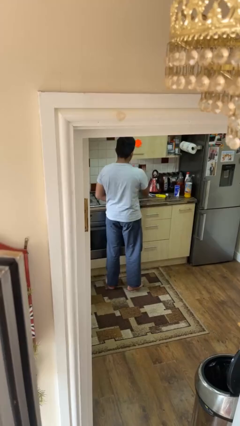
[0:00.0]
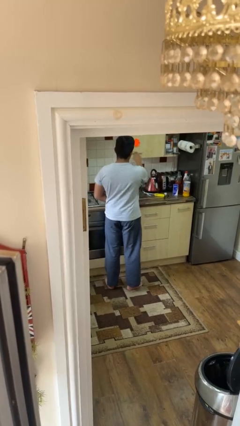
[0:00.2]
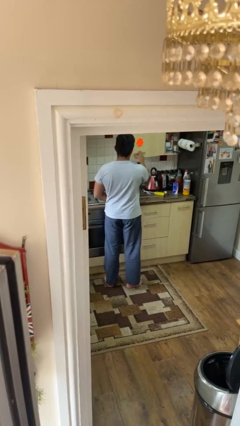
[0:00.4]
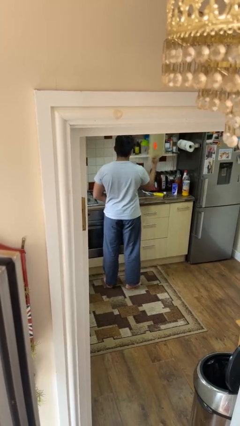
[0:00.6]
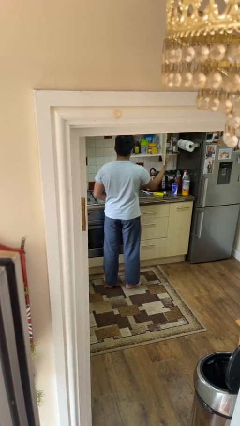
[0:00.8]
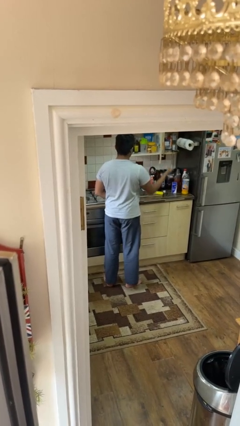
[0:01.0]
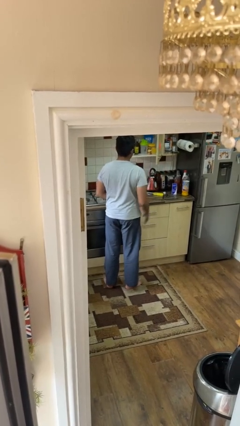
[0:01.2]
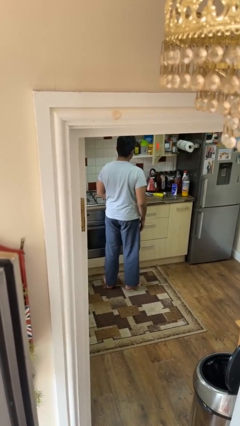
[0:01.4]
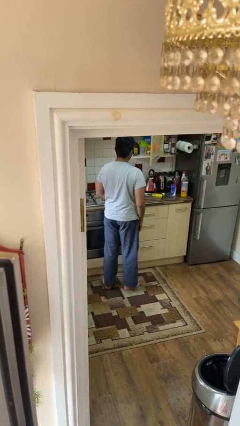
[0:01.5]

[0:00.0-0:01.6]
person opens cabinet

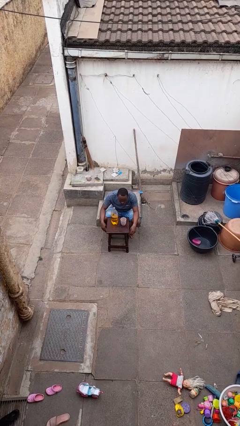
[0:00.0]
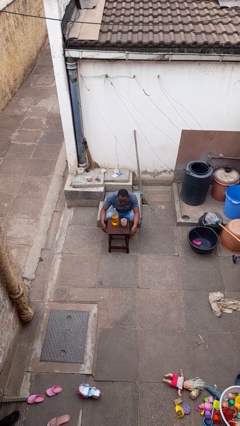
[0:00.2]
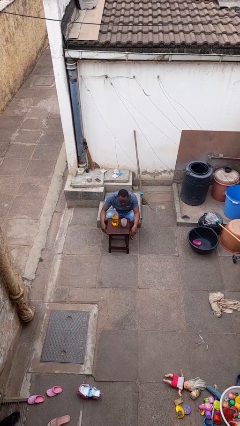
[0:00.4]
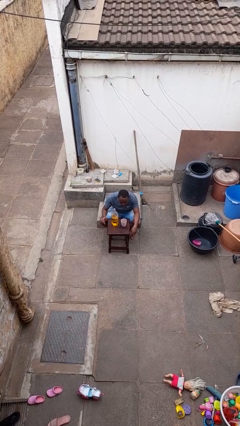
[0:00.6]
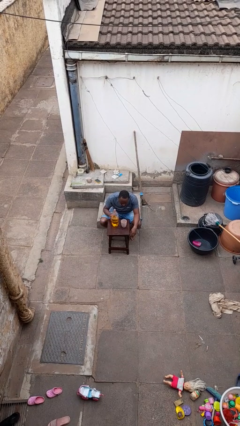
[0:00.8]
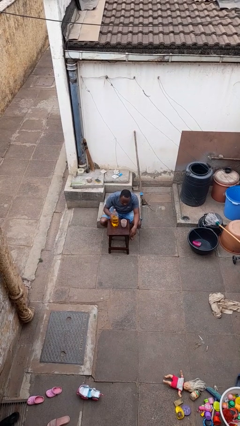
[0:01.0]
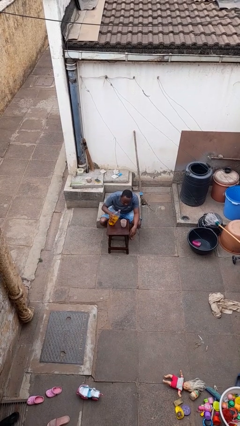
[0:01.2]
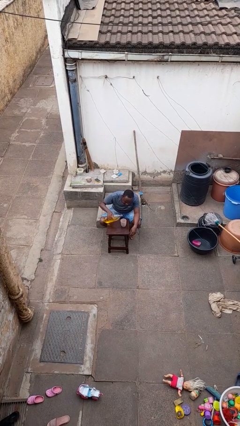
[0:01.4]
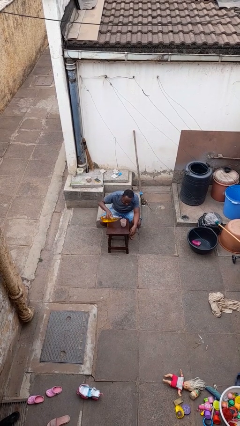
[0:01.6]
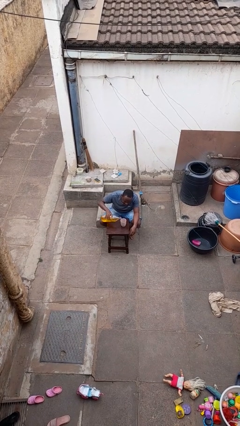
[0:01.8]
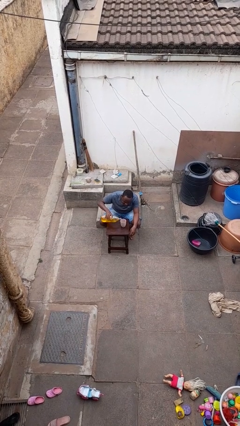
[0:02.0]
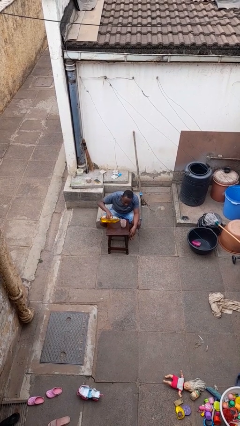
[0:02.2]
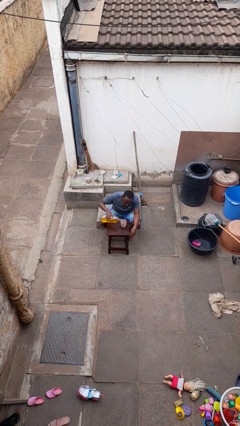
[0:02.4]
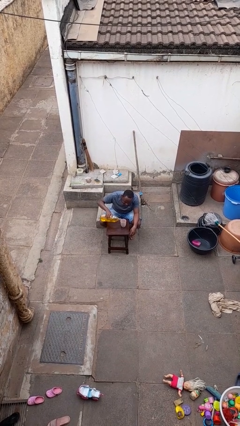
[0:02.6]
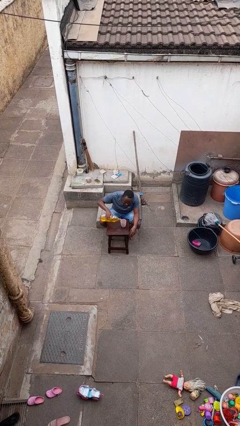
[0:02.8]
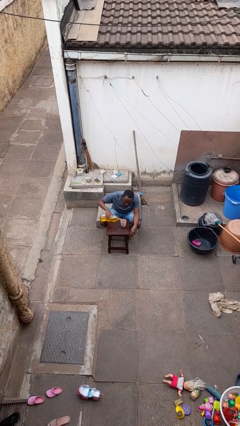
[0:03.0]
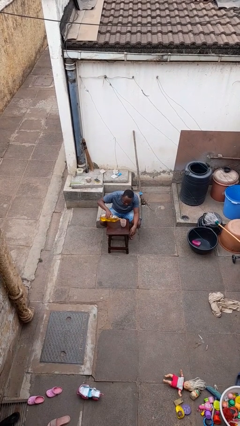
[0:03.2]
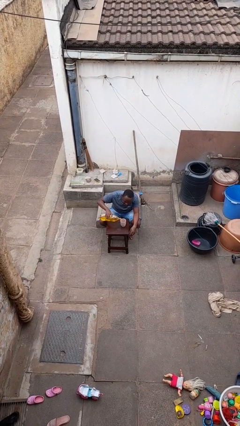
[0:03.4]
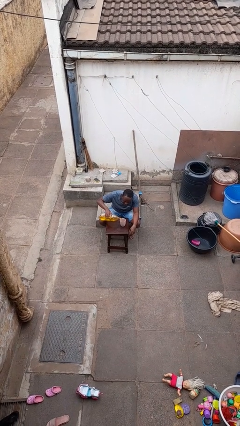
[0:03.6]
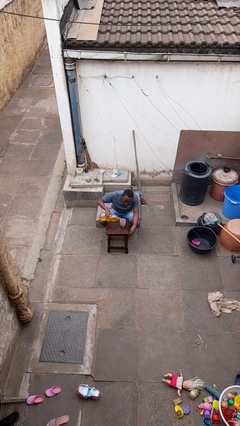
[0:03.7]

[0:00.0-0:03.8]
person pours liquid into cup

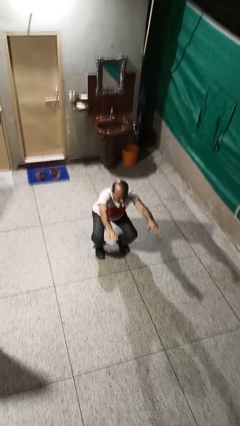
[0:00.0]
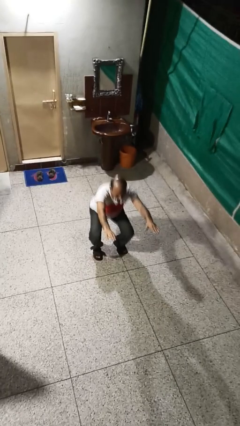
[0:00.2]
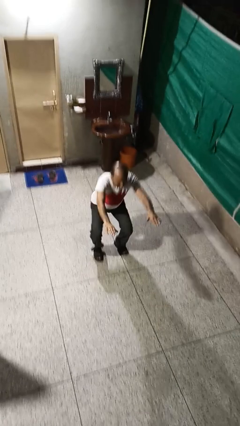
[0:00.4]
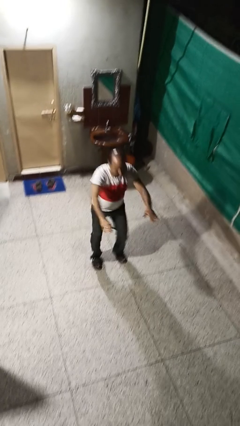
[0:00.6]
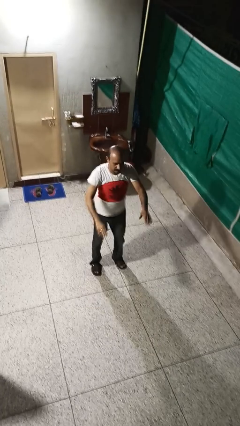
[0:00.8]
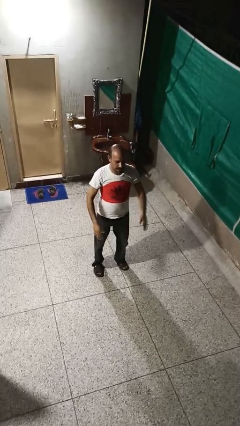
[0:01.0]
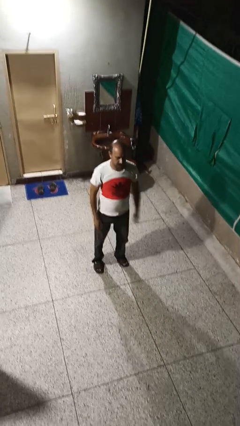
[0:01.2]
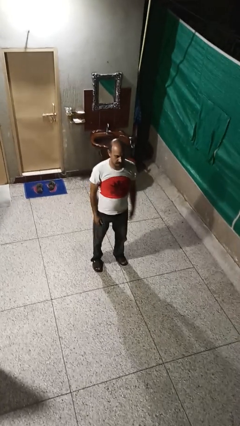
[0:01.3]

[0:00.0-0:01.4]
person stands up

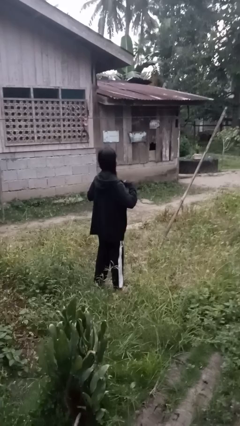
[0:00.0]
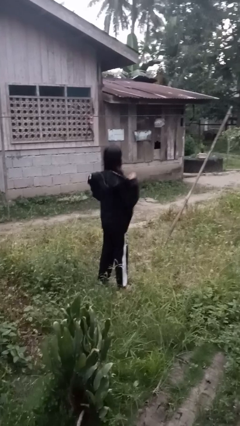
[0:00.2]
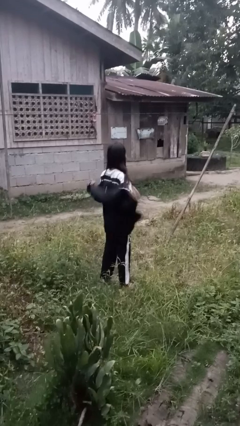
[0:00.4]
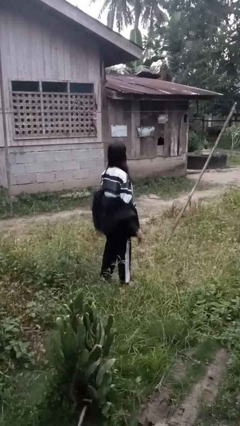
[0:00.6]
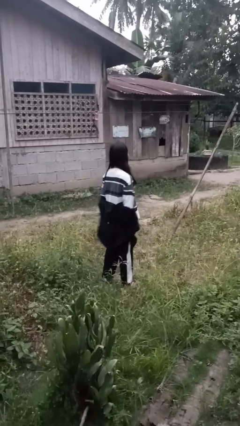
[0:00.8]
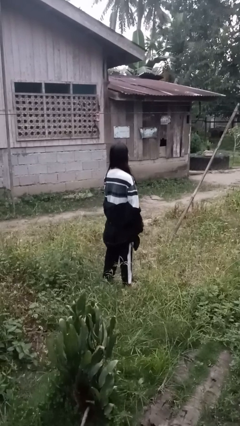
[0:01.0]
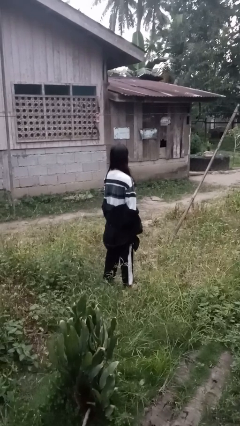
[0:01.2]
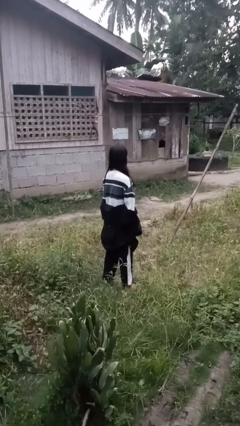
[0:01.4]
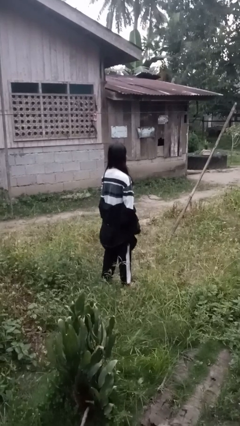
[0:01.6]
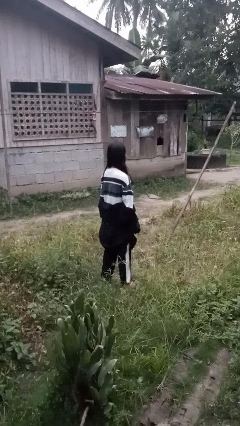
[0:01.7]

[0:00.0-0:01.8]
person takes off jacket

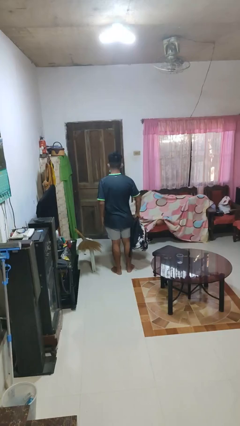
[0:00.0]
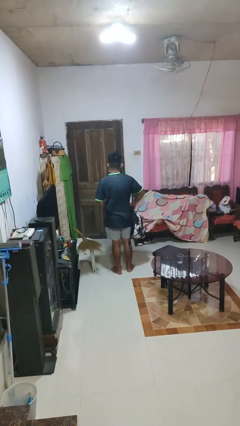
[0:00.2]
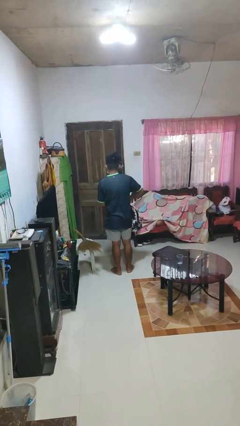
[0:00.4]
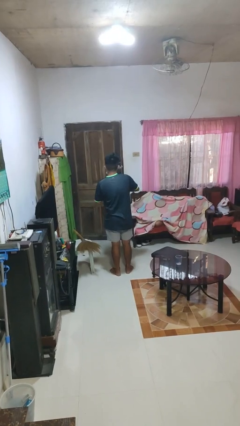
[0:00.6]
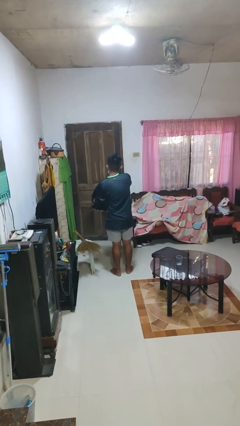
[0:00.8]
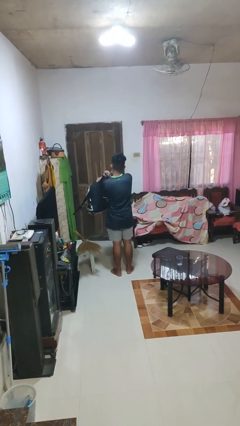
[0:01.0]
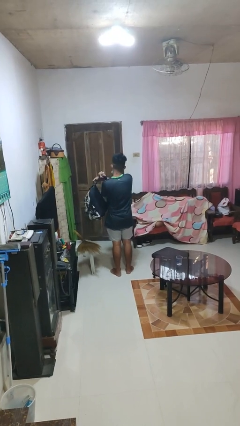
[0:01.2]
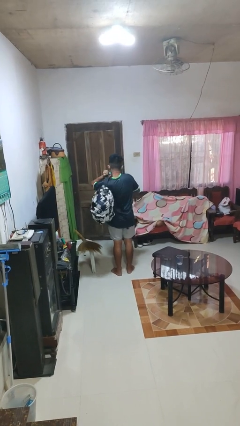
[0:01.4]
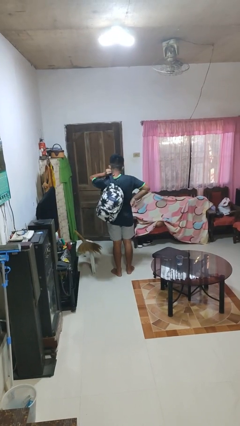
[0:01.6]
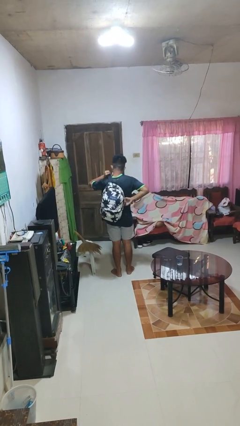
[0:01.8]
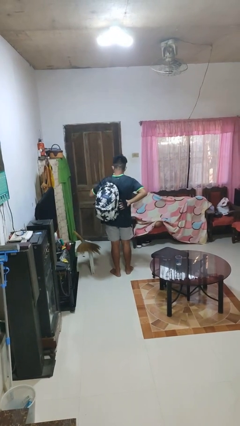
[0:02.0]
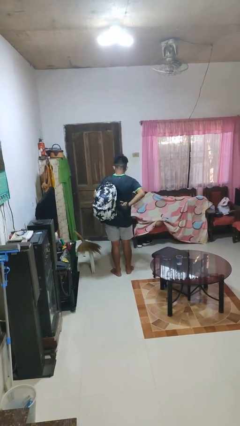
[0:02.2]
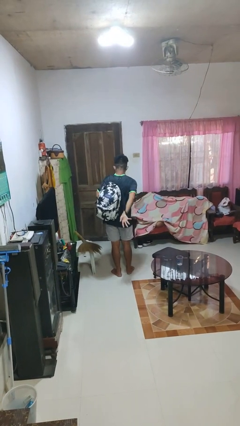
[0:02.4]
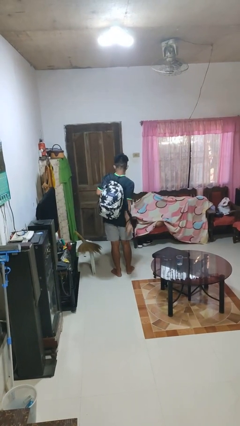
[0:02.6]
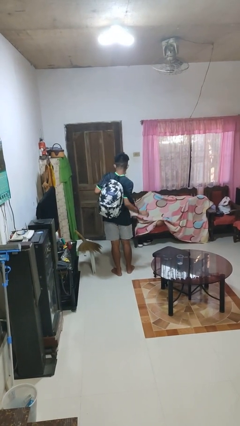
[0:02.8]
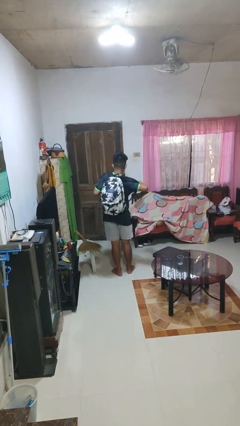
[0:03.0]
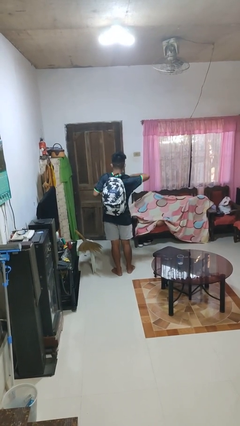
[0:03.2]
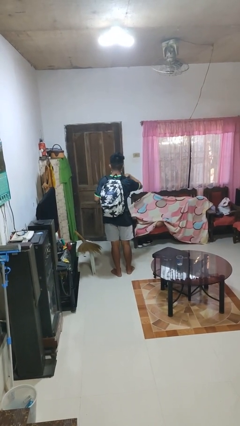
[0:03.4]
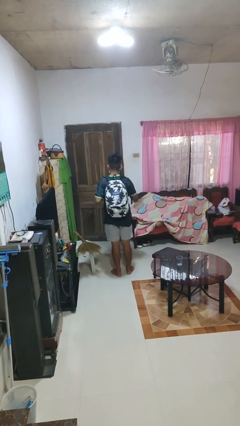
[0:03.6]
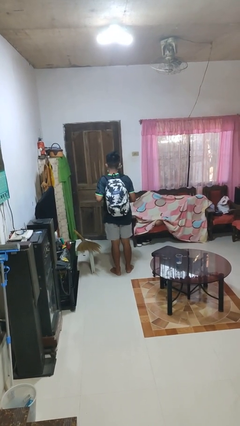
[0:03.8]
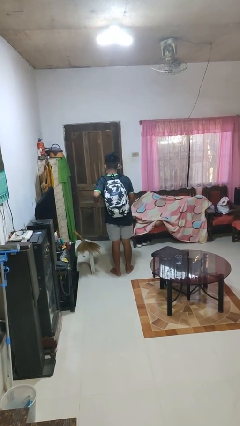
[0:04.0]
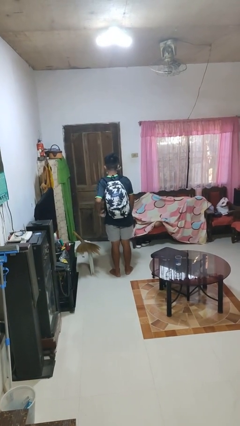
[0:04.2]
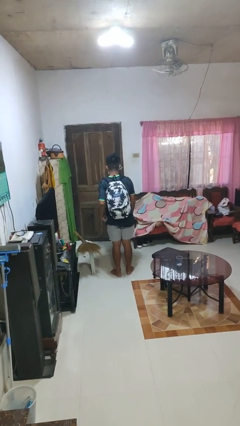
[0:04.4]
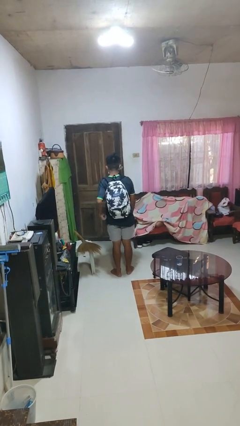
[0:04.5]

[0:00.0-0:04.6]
person puts on backpack

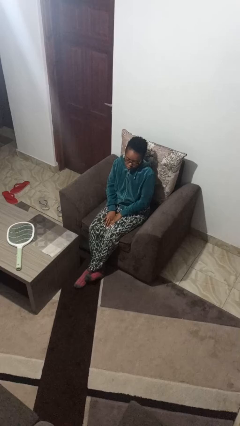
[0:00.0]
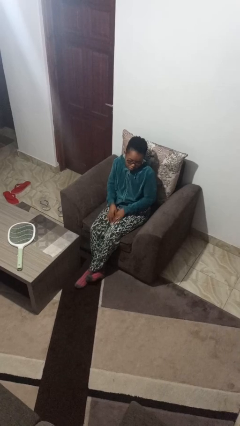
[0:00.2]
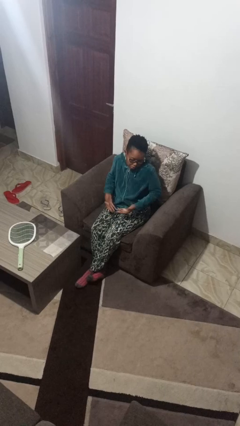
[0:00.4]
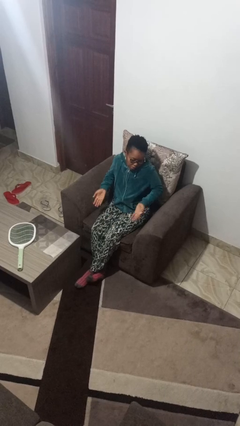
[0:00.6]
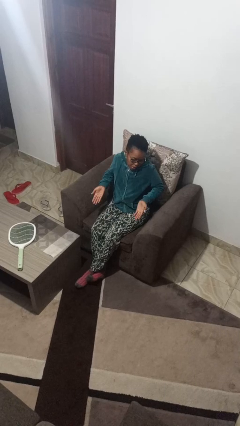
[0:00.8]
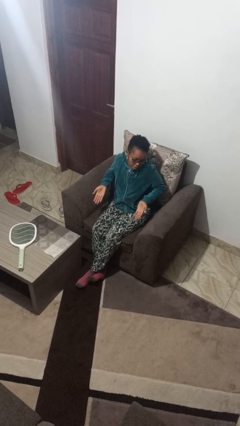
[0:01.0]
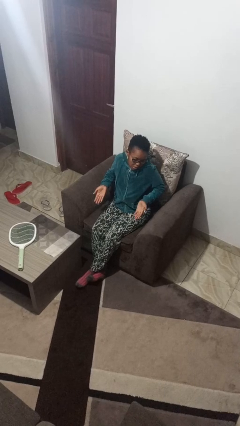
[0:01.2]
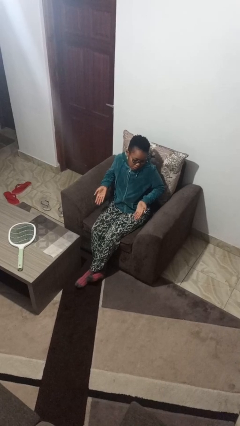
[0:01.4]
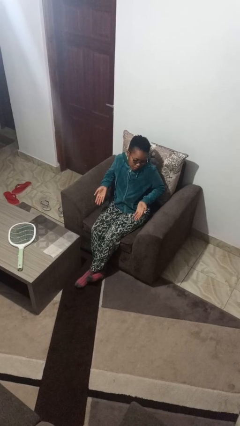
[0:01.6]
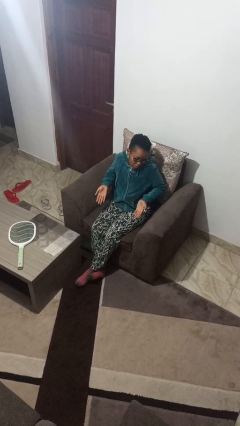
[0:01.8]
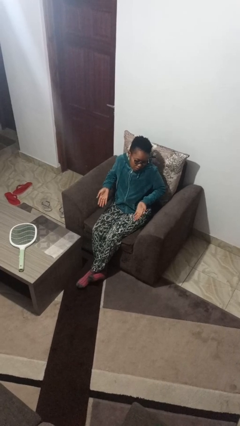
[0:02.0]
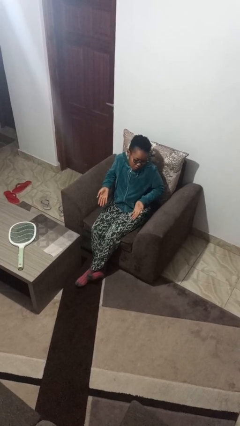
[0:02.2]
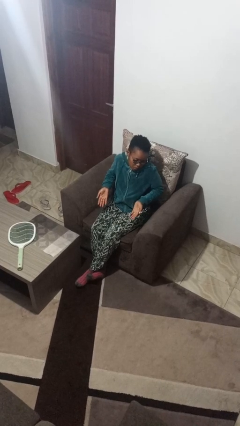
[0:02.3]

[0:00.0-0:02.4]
person shrugs

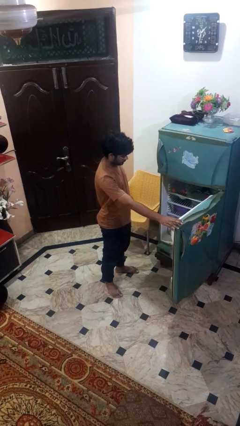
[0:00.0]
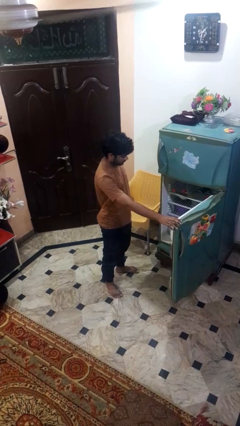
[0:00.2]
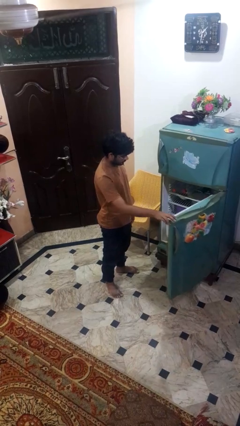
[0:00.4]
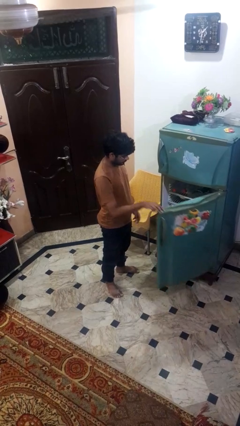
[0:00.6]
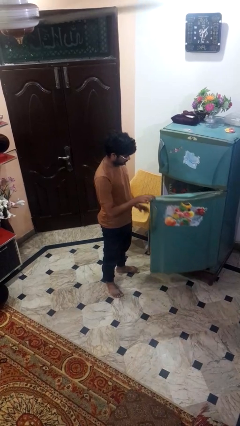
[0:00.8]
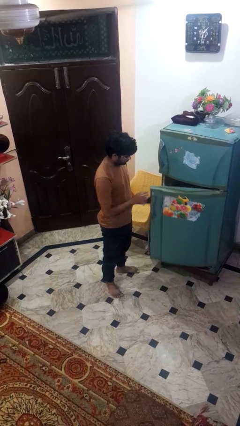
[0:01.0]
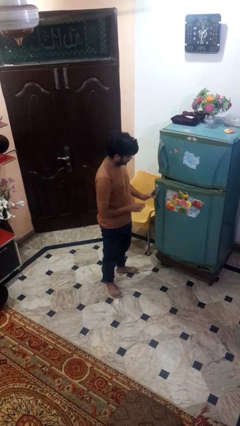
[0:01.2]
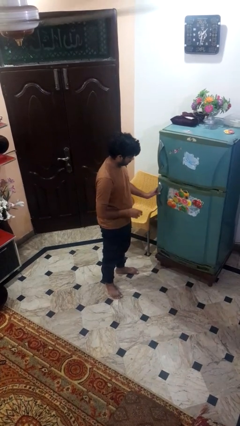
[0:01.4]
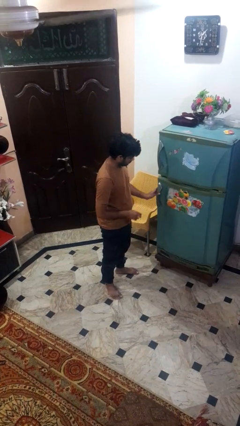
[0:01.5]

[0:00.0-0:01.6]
person closes refrigerator
